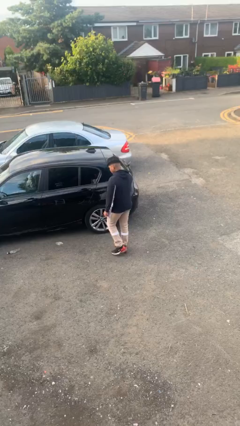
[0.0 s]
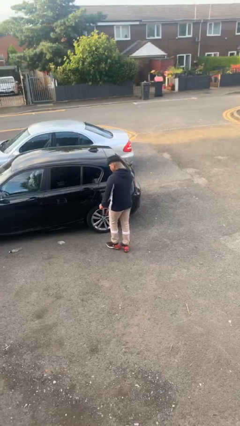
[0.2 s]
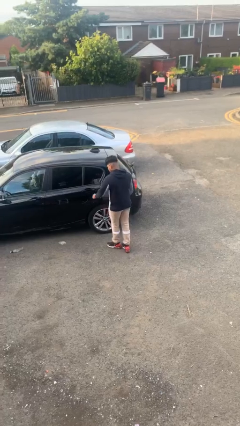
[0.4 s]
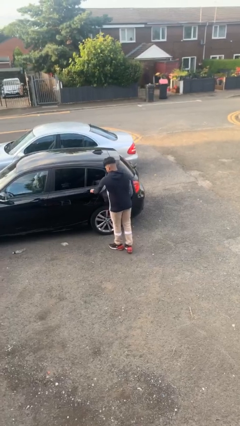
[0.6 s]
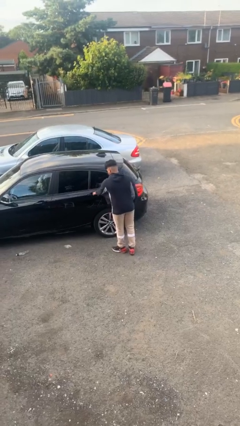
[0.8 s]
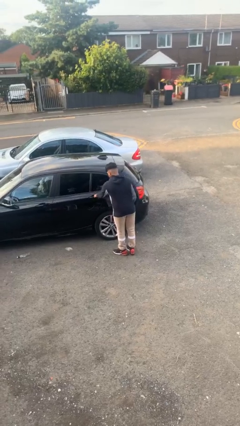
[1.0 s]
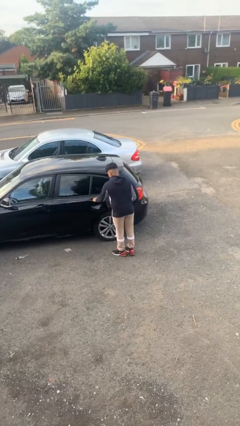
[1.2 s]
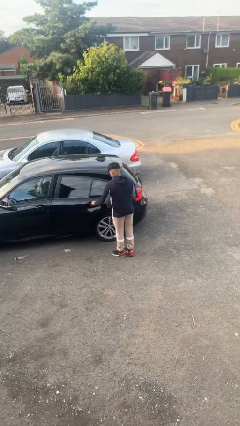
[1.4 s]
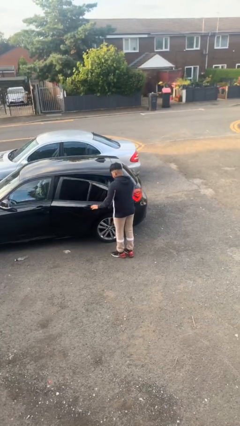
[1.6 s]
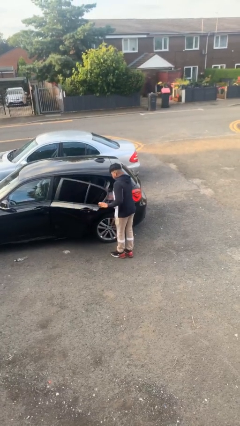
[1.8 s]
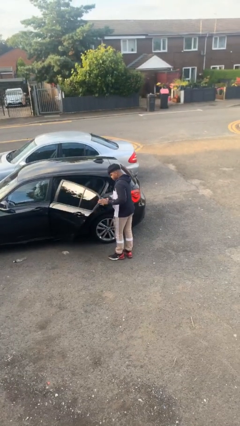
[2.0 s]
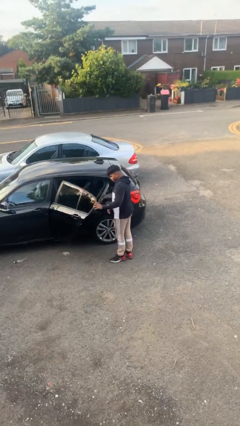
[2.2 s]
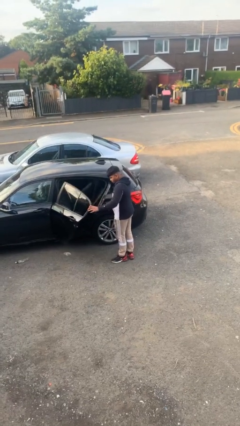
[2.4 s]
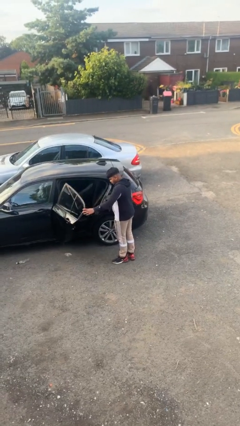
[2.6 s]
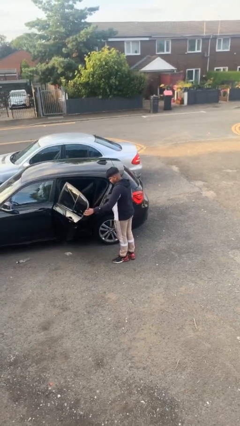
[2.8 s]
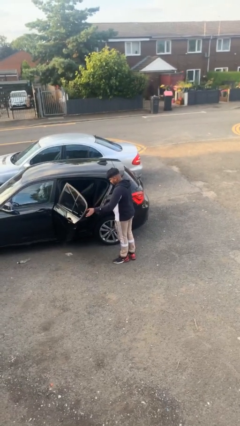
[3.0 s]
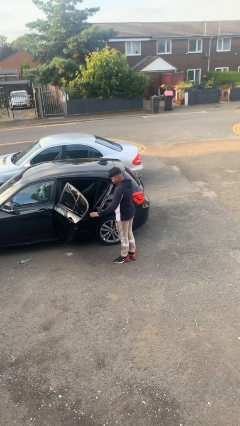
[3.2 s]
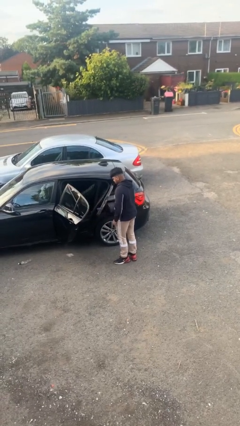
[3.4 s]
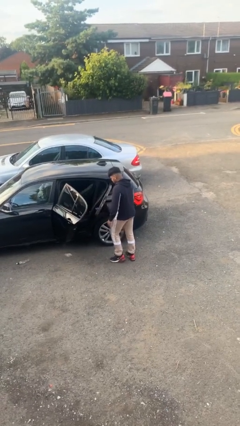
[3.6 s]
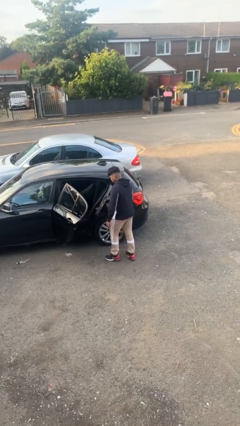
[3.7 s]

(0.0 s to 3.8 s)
person opens car door

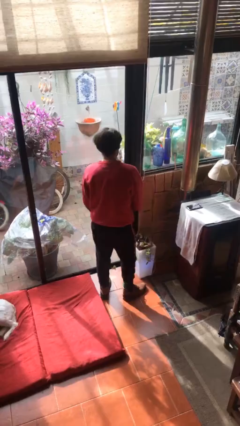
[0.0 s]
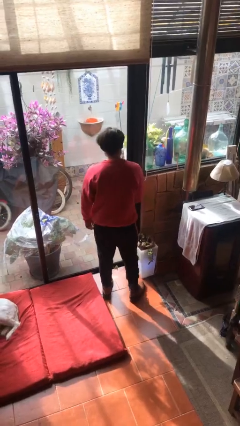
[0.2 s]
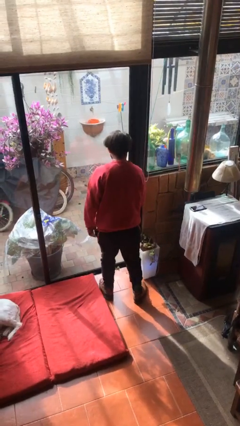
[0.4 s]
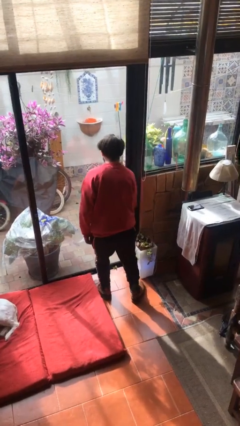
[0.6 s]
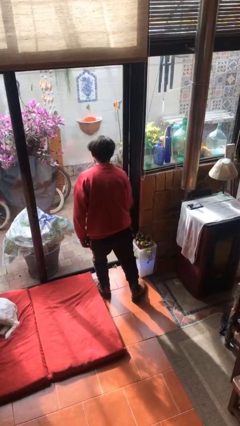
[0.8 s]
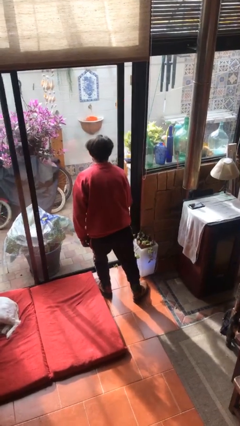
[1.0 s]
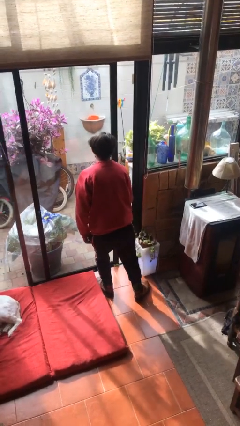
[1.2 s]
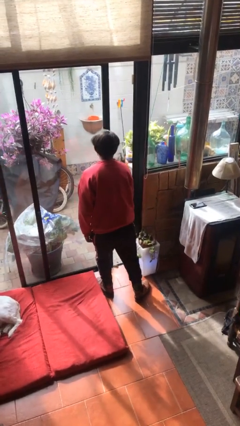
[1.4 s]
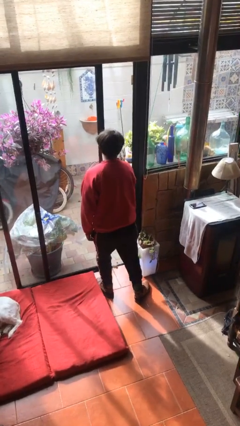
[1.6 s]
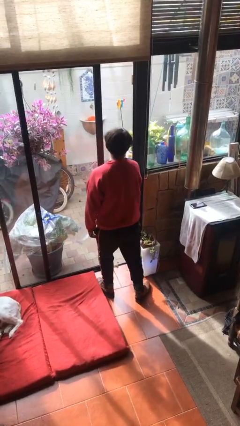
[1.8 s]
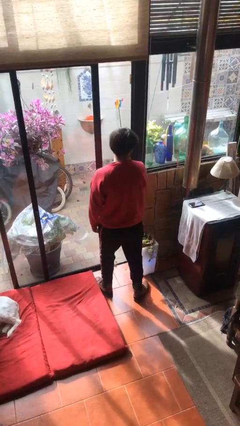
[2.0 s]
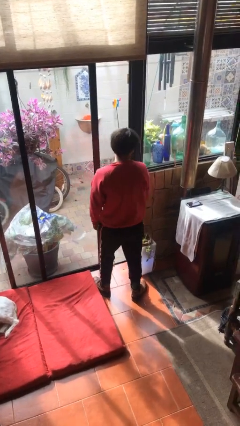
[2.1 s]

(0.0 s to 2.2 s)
person opens sliding door

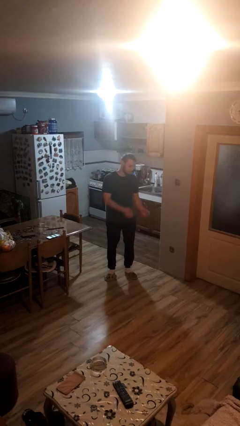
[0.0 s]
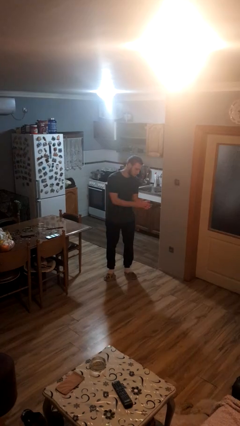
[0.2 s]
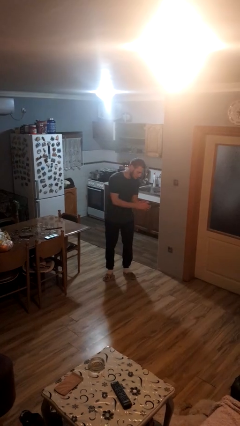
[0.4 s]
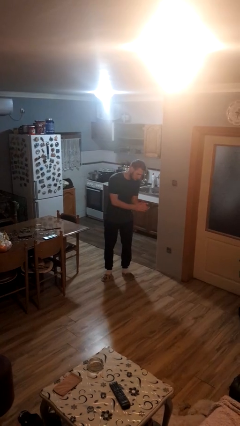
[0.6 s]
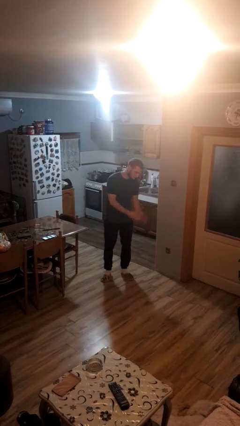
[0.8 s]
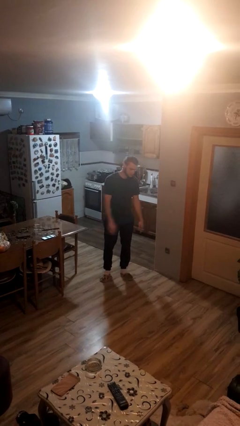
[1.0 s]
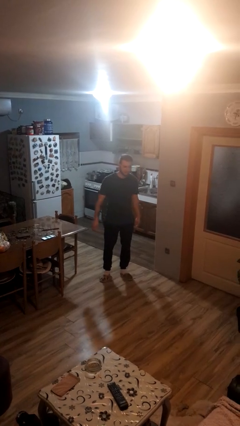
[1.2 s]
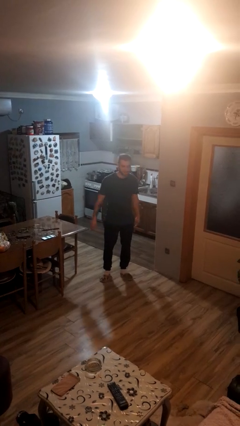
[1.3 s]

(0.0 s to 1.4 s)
person claps hands

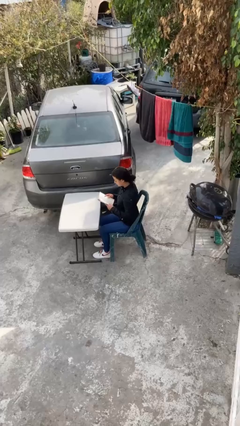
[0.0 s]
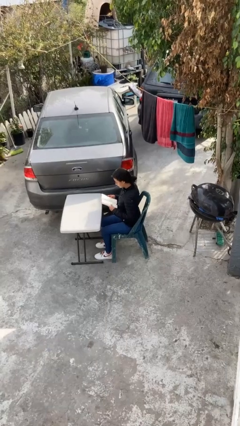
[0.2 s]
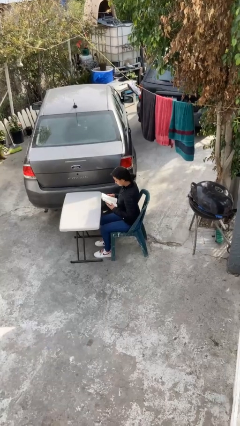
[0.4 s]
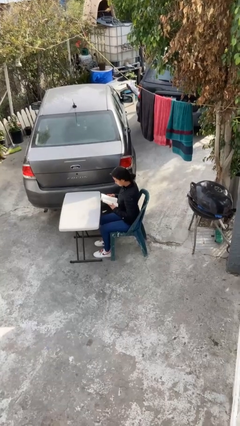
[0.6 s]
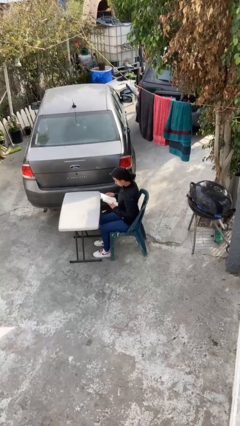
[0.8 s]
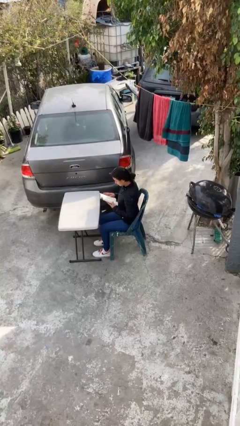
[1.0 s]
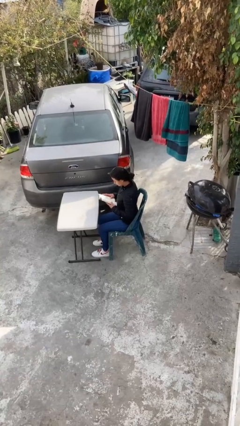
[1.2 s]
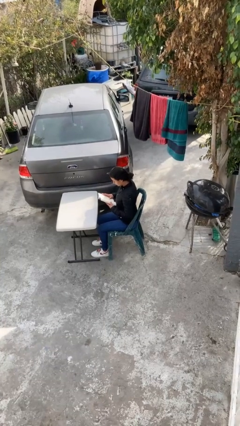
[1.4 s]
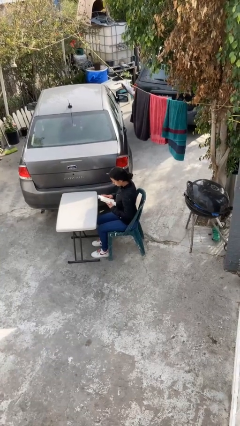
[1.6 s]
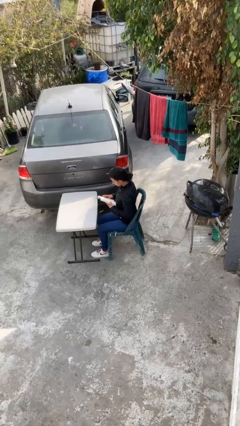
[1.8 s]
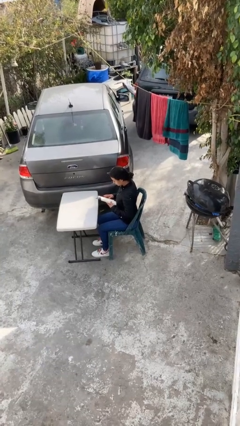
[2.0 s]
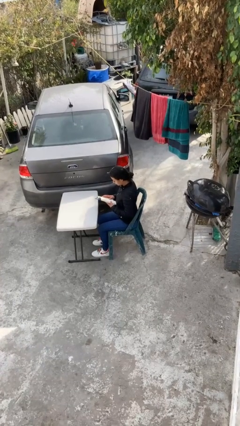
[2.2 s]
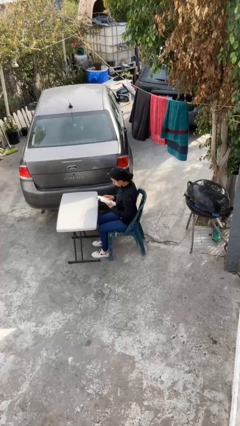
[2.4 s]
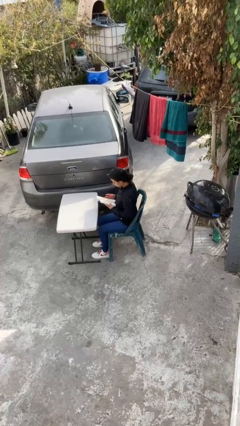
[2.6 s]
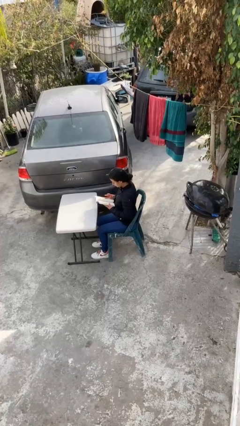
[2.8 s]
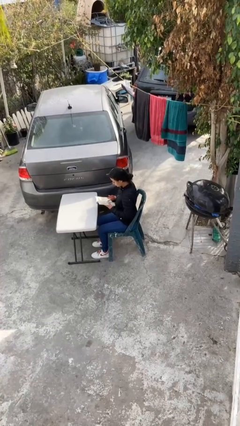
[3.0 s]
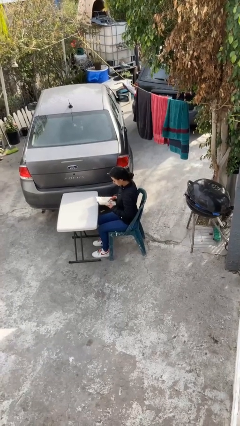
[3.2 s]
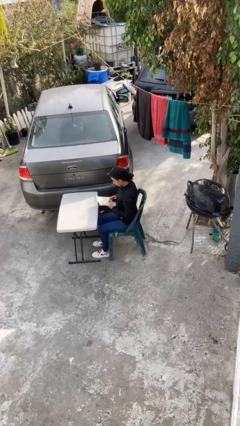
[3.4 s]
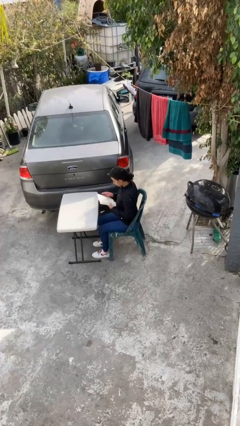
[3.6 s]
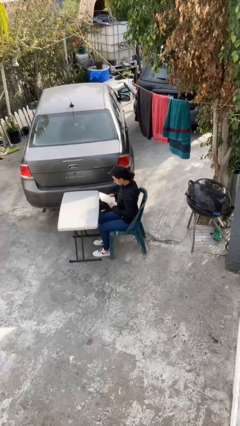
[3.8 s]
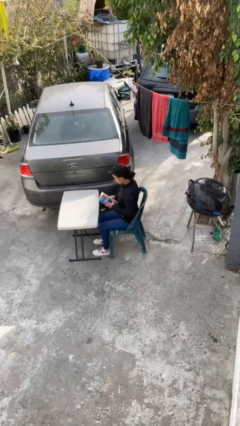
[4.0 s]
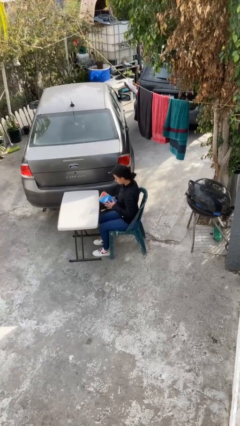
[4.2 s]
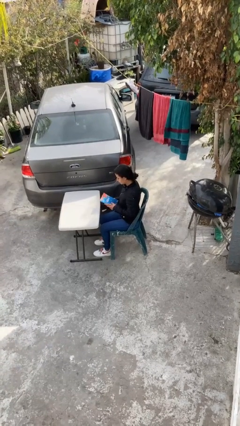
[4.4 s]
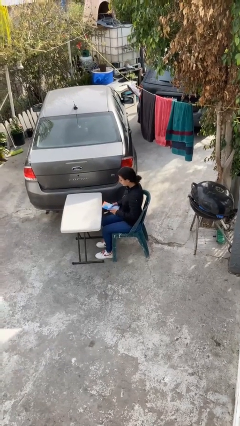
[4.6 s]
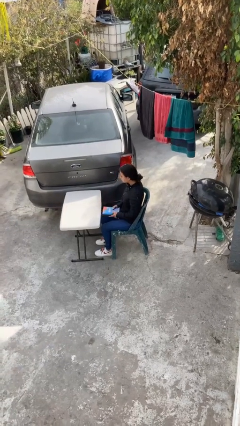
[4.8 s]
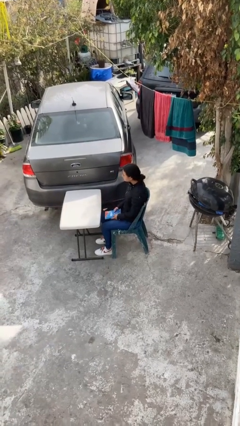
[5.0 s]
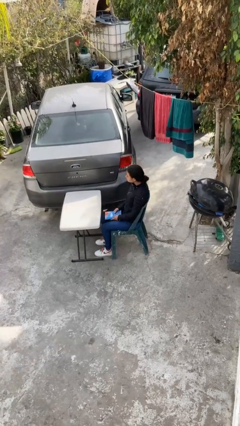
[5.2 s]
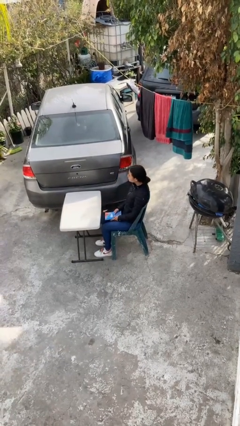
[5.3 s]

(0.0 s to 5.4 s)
person reads document

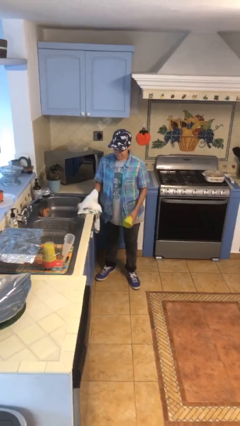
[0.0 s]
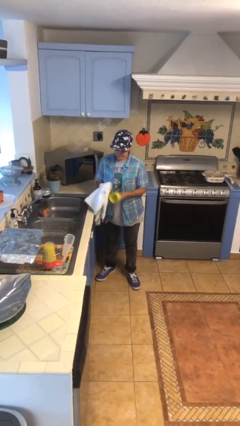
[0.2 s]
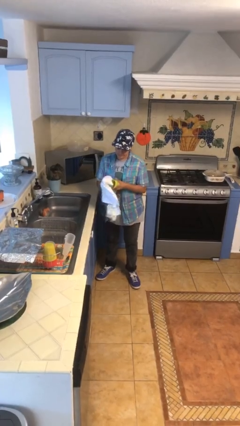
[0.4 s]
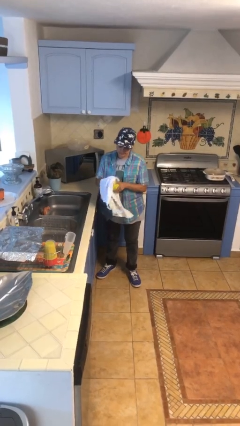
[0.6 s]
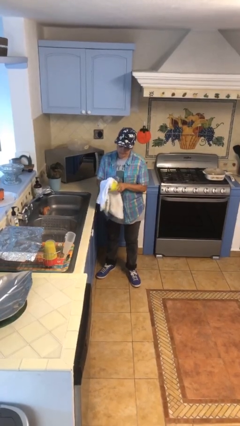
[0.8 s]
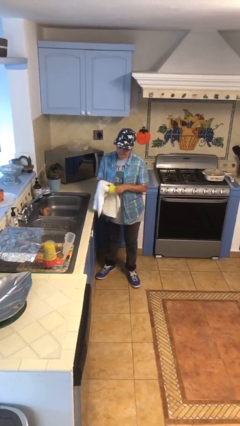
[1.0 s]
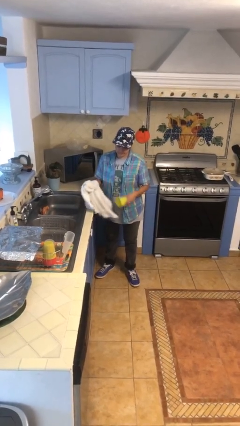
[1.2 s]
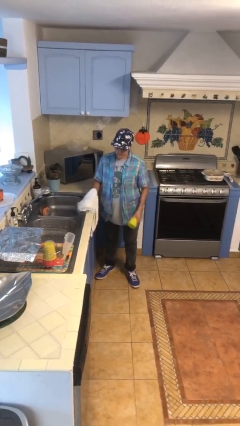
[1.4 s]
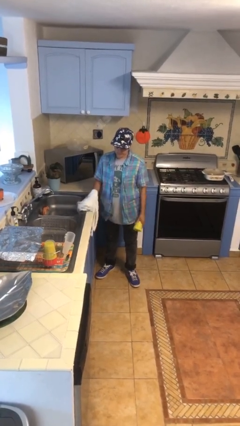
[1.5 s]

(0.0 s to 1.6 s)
person dries dish

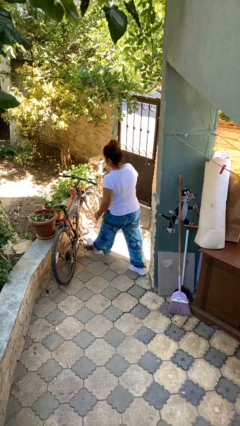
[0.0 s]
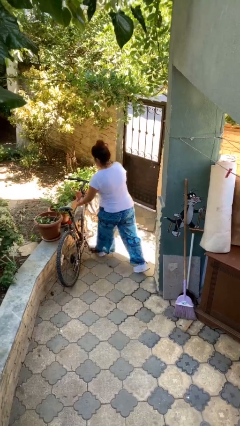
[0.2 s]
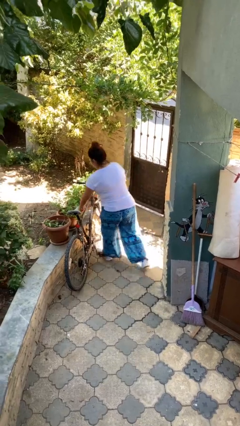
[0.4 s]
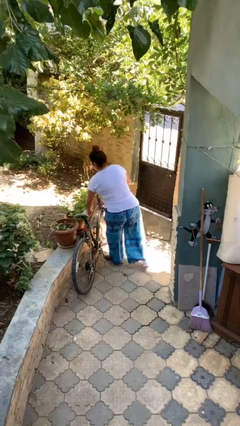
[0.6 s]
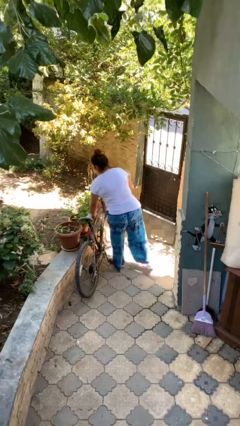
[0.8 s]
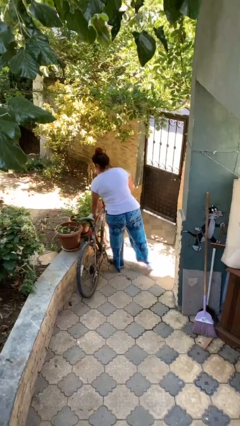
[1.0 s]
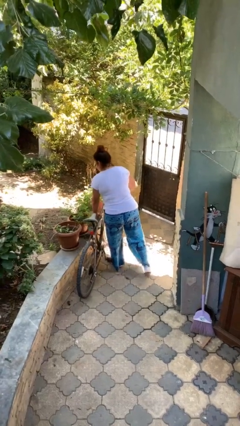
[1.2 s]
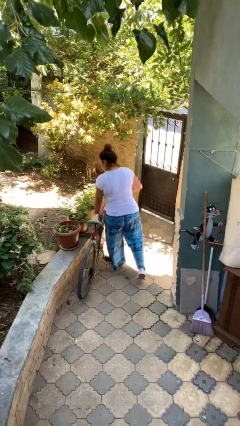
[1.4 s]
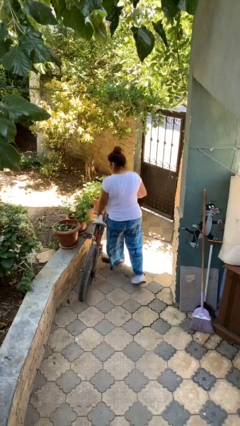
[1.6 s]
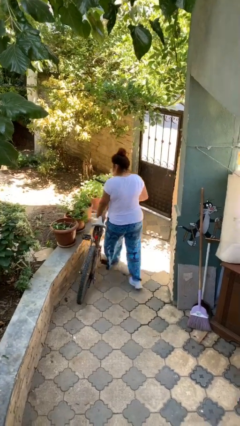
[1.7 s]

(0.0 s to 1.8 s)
person picks up object from floor

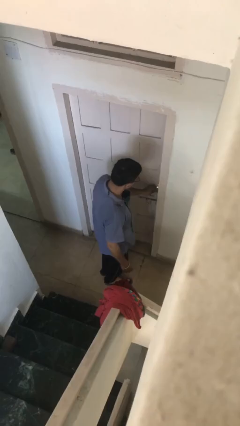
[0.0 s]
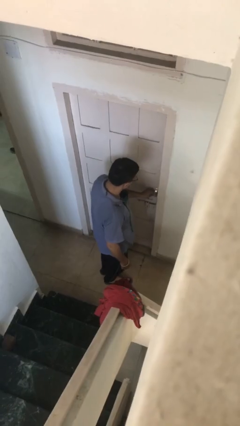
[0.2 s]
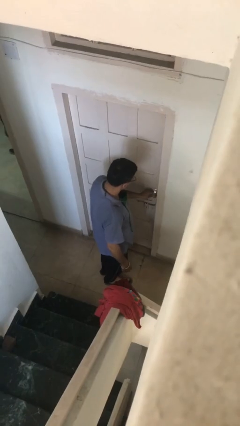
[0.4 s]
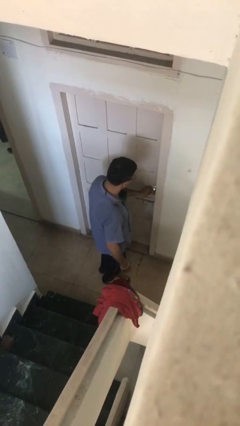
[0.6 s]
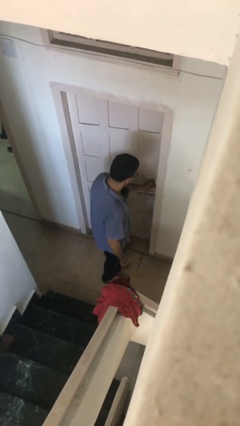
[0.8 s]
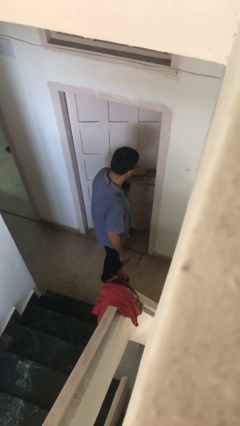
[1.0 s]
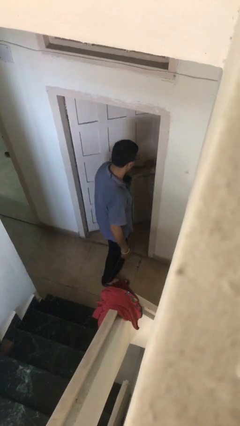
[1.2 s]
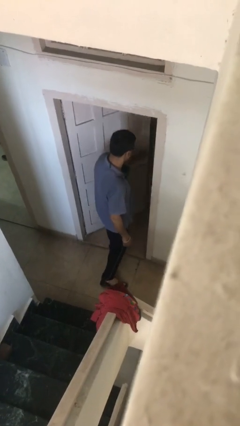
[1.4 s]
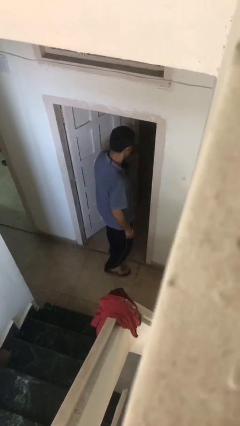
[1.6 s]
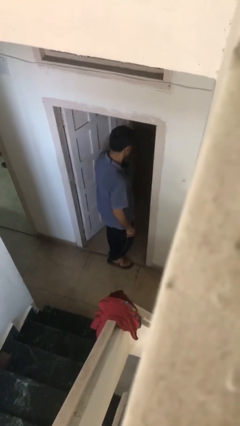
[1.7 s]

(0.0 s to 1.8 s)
person opens facility door
